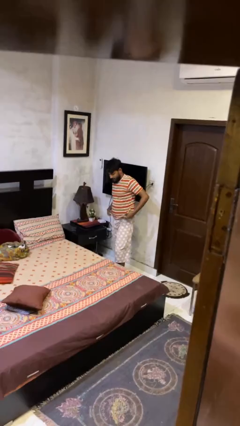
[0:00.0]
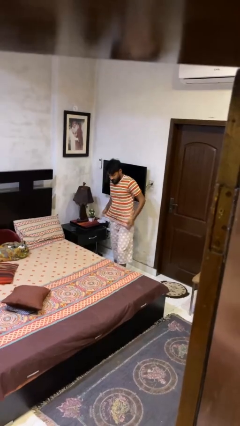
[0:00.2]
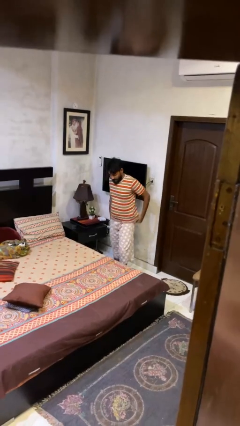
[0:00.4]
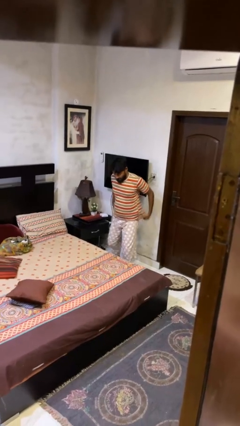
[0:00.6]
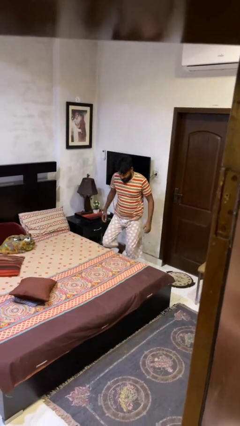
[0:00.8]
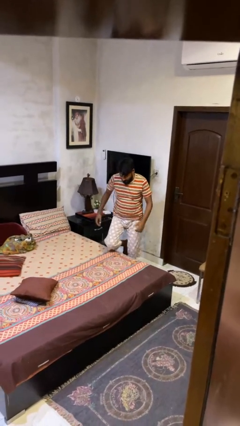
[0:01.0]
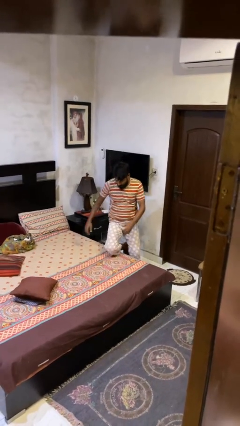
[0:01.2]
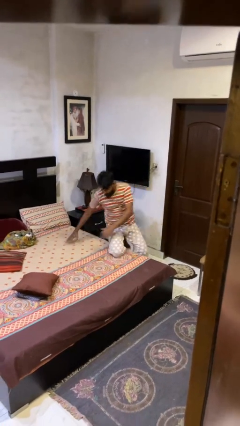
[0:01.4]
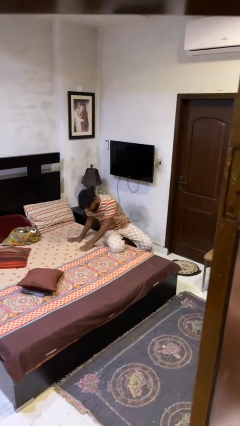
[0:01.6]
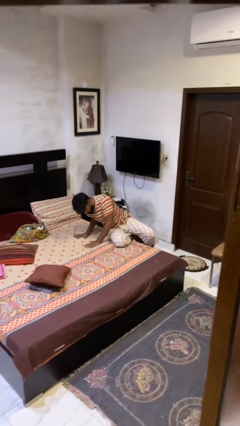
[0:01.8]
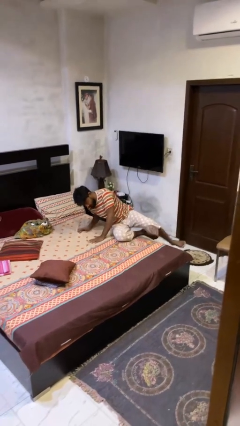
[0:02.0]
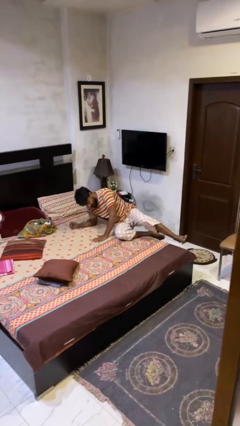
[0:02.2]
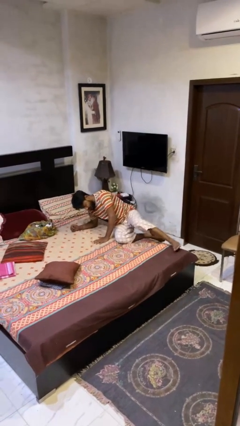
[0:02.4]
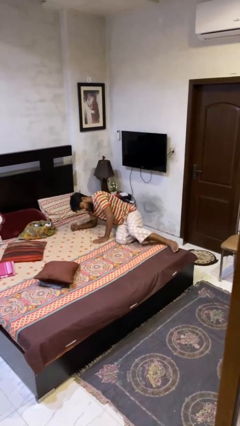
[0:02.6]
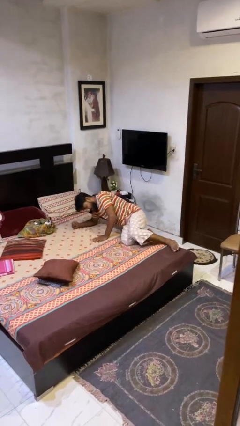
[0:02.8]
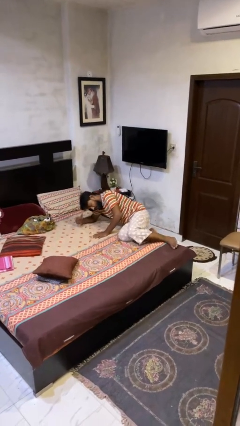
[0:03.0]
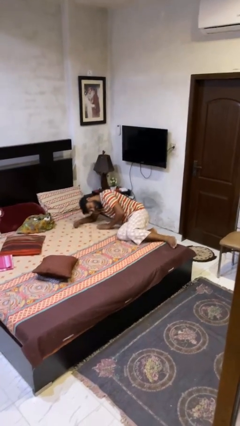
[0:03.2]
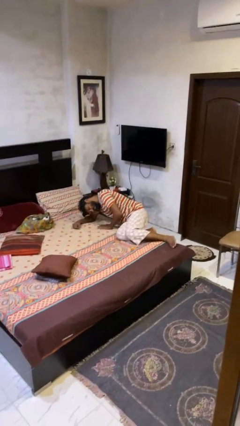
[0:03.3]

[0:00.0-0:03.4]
person lies down on bed

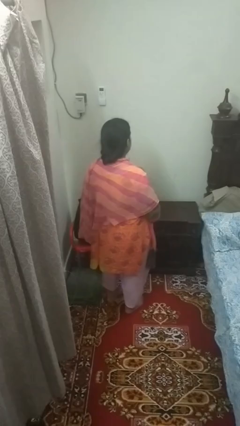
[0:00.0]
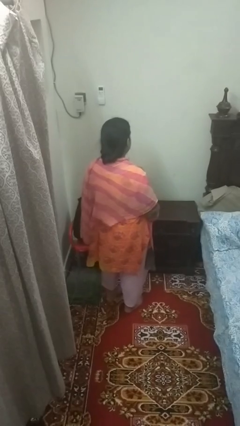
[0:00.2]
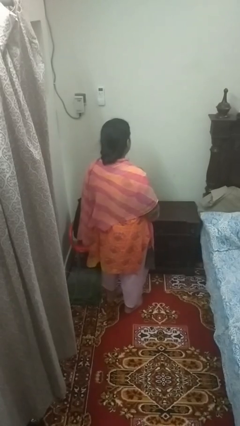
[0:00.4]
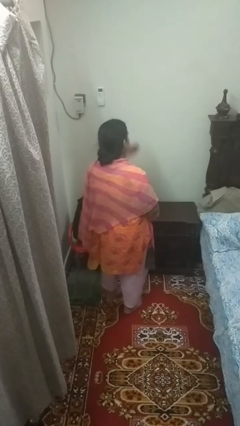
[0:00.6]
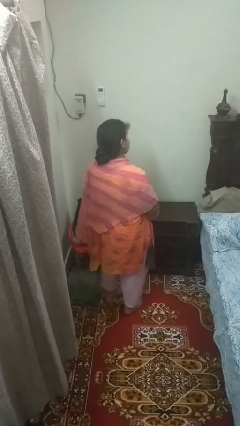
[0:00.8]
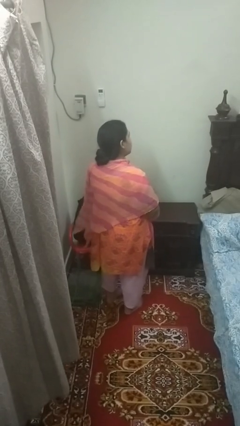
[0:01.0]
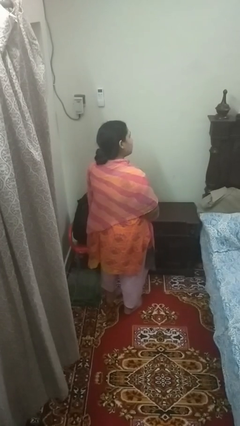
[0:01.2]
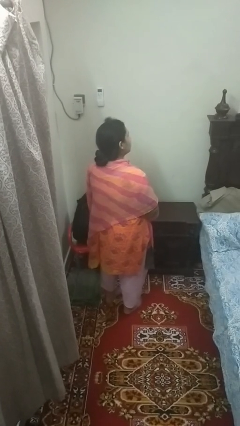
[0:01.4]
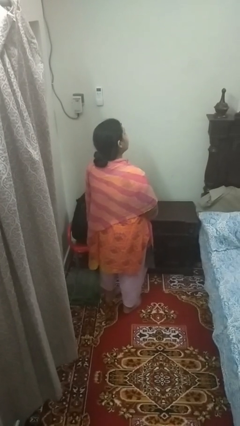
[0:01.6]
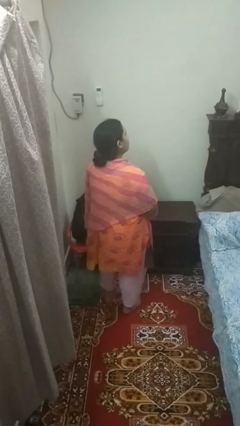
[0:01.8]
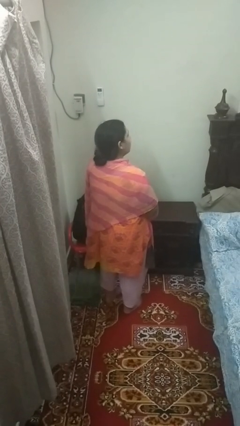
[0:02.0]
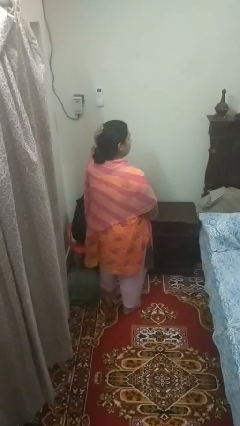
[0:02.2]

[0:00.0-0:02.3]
person strokes hair

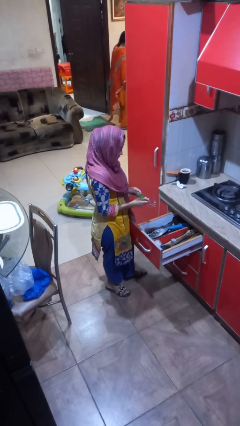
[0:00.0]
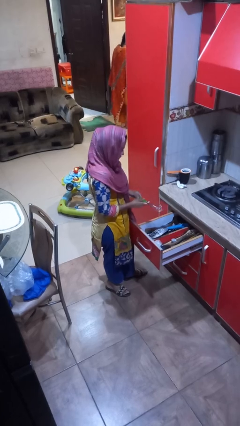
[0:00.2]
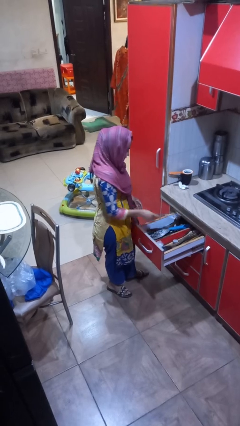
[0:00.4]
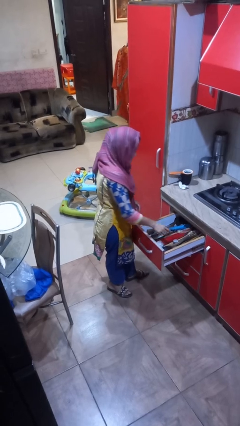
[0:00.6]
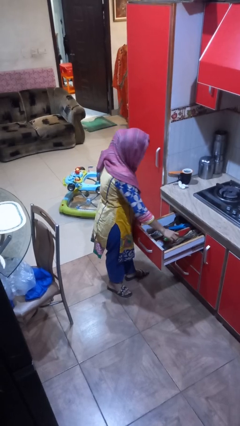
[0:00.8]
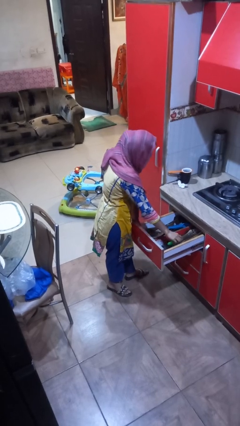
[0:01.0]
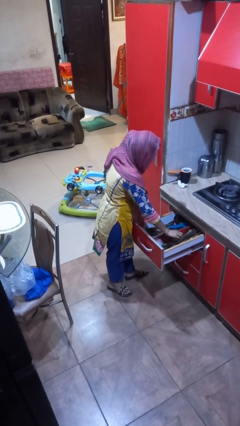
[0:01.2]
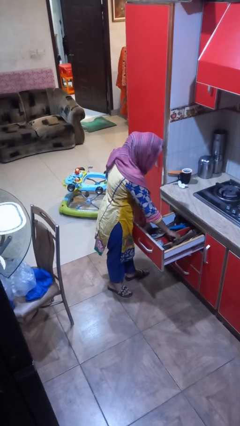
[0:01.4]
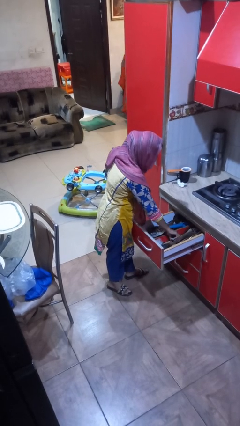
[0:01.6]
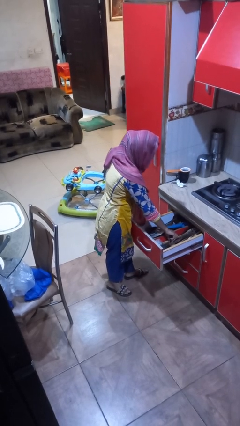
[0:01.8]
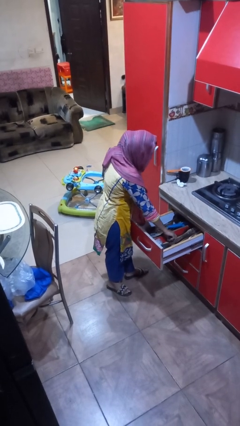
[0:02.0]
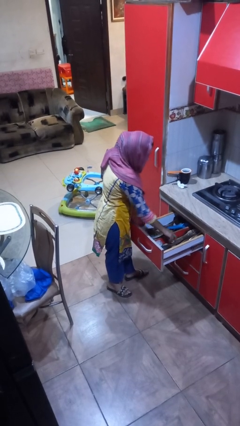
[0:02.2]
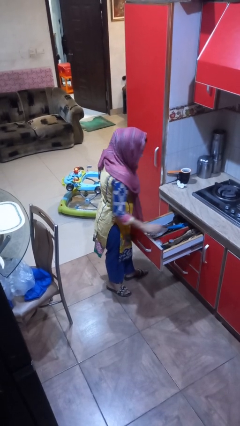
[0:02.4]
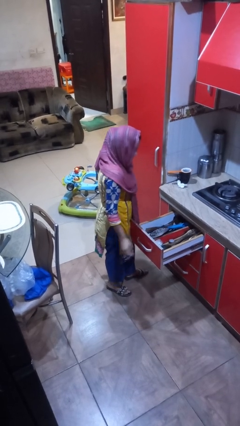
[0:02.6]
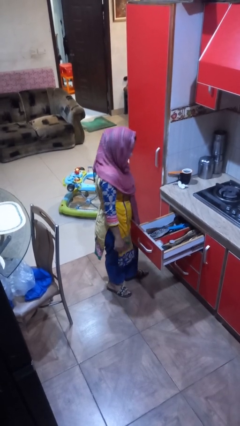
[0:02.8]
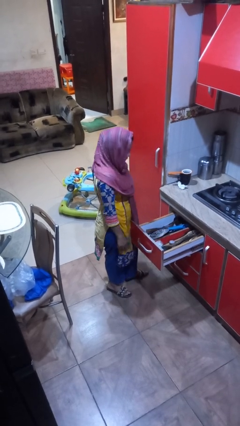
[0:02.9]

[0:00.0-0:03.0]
person puts object into kitchen drawer

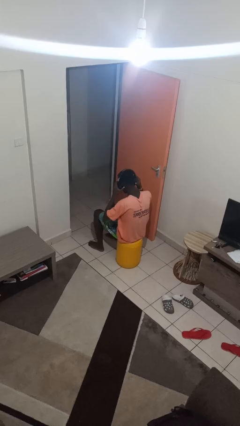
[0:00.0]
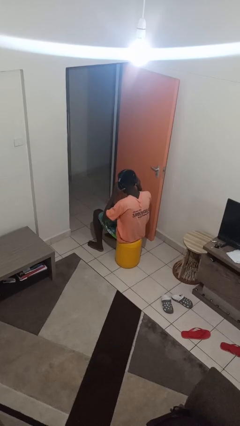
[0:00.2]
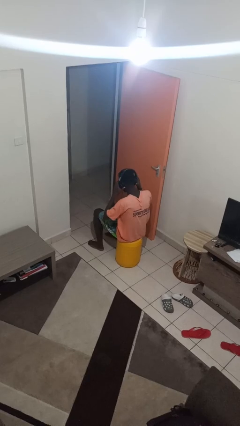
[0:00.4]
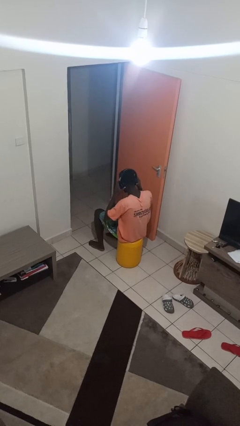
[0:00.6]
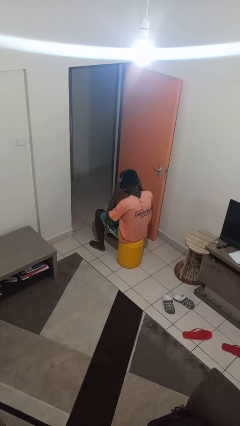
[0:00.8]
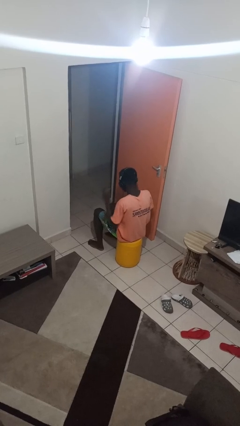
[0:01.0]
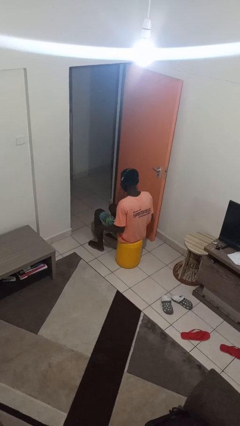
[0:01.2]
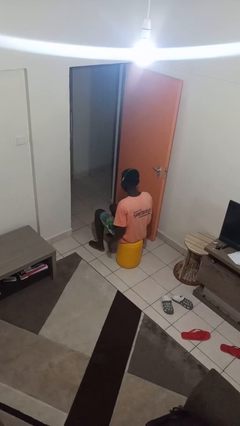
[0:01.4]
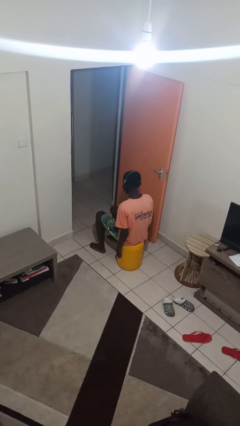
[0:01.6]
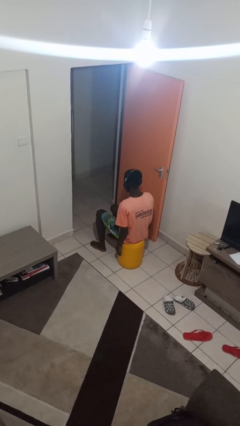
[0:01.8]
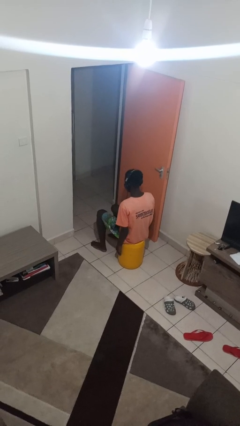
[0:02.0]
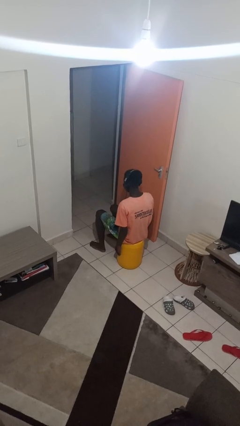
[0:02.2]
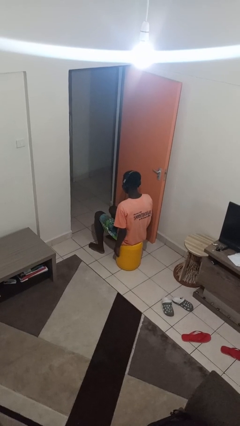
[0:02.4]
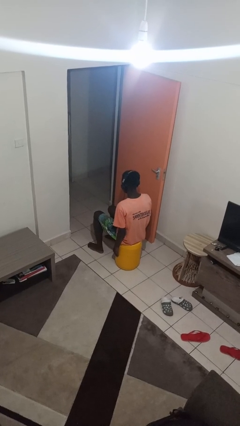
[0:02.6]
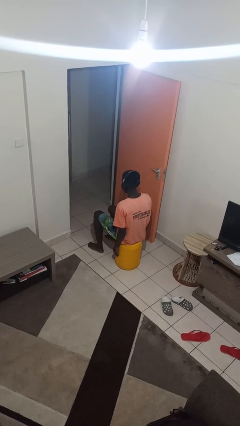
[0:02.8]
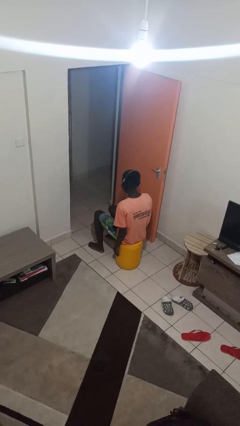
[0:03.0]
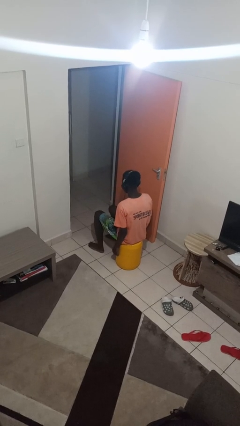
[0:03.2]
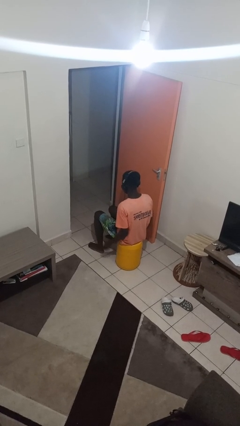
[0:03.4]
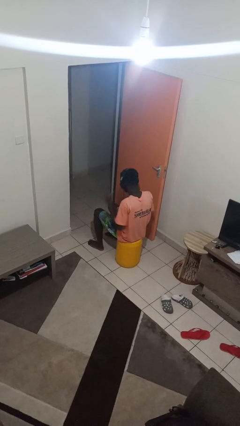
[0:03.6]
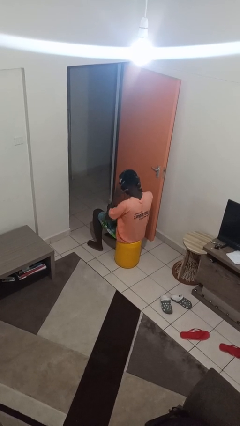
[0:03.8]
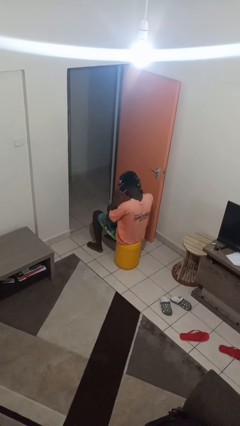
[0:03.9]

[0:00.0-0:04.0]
person puts on headphones

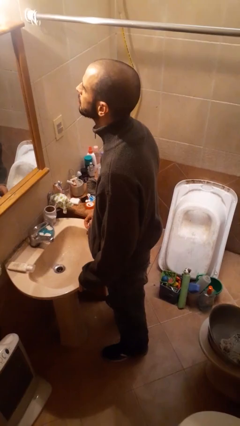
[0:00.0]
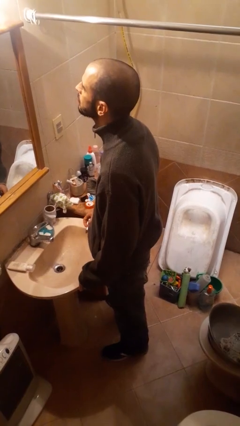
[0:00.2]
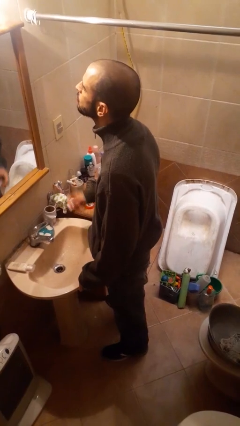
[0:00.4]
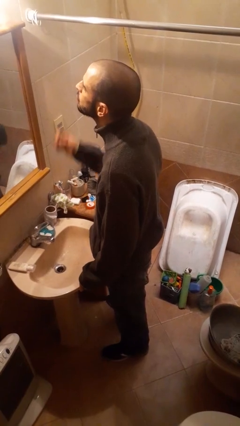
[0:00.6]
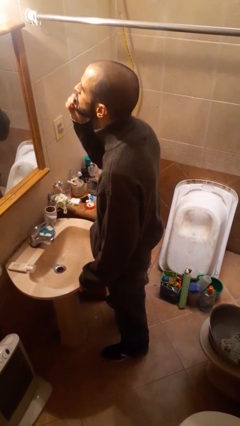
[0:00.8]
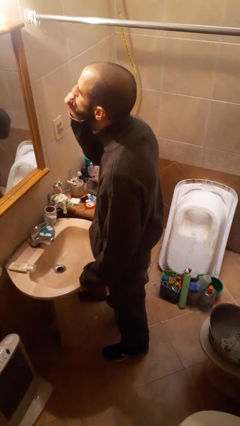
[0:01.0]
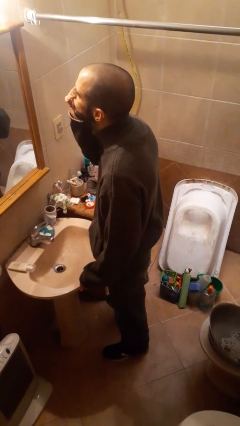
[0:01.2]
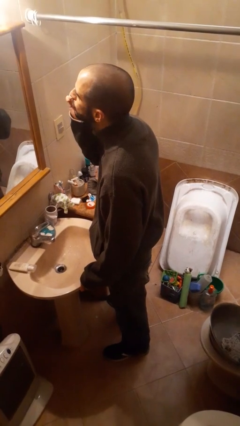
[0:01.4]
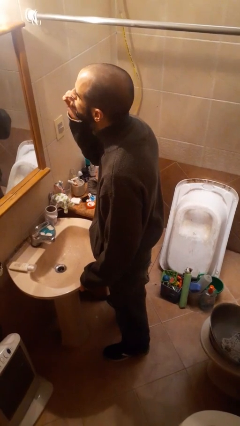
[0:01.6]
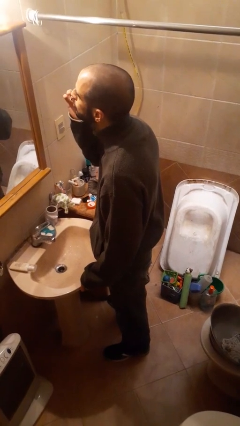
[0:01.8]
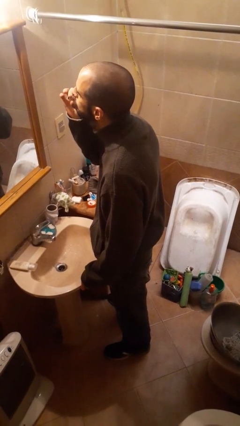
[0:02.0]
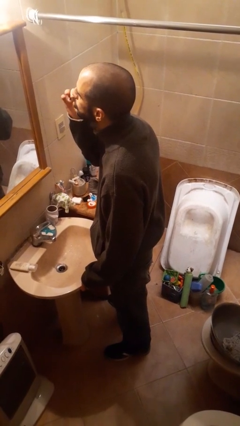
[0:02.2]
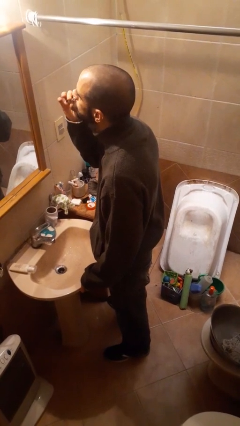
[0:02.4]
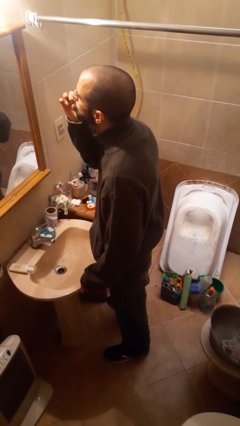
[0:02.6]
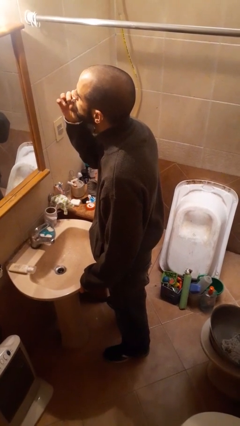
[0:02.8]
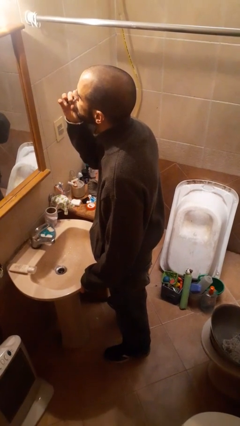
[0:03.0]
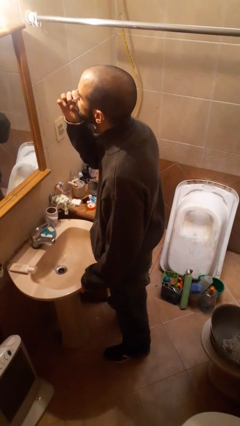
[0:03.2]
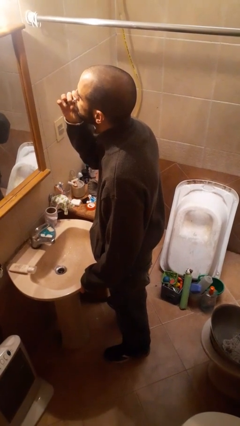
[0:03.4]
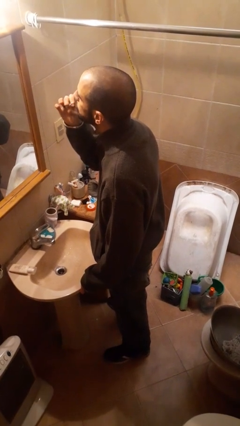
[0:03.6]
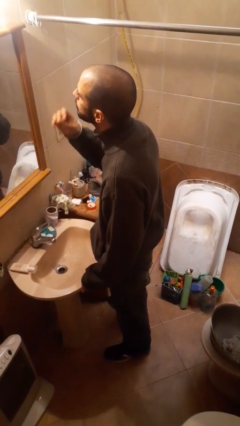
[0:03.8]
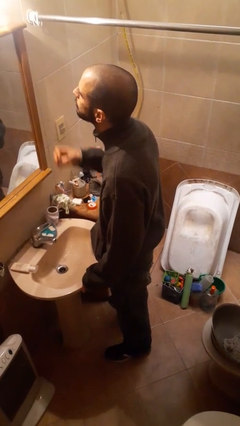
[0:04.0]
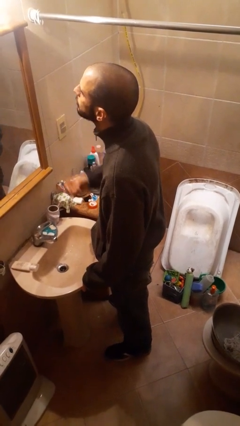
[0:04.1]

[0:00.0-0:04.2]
person applies lip makeup

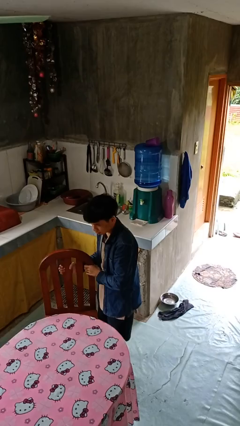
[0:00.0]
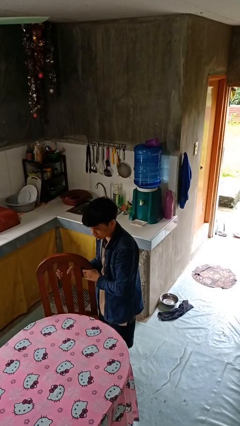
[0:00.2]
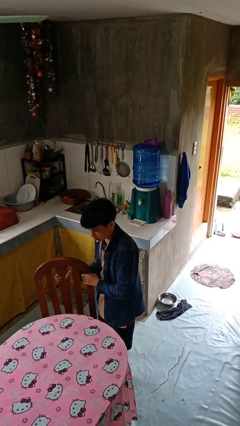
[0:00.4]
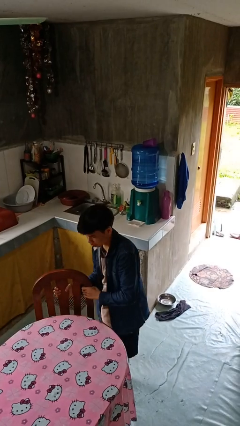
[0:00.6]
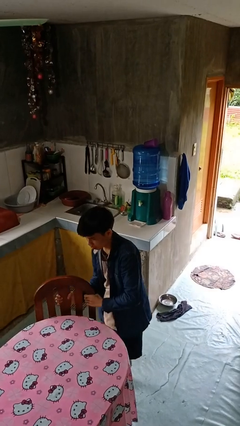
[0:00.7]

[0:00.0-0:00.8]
person pushes in chair
